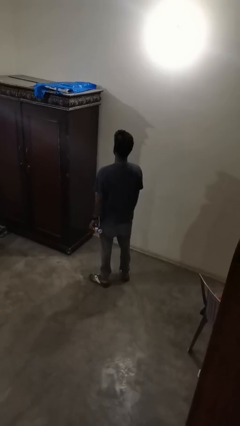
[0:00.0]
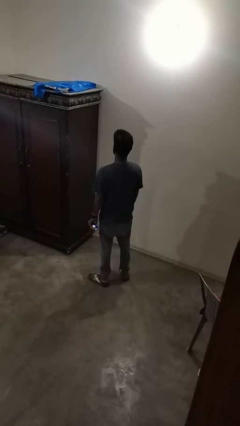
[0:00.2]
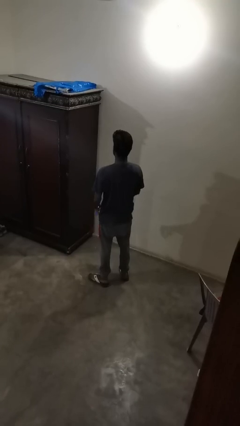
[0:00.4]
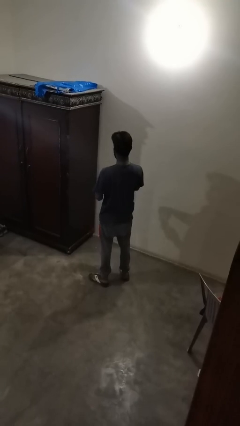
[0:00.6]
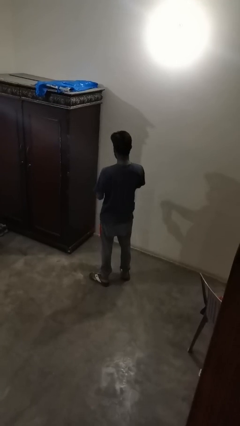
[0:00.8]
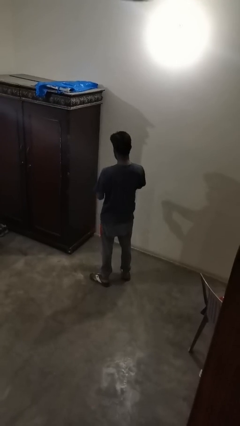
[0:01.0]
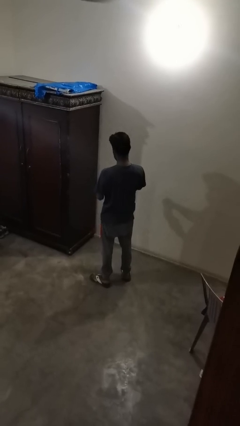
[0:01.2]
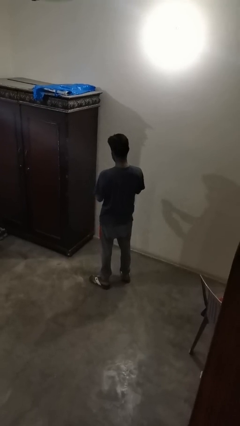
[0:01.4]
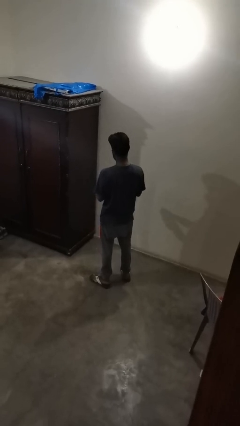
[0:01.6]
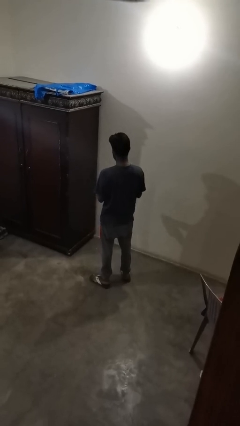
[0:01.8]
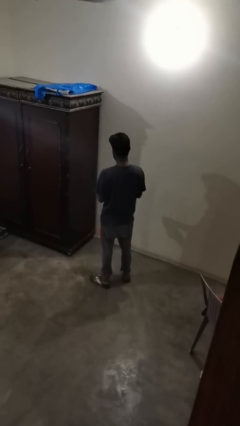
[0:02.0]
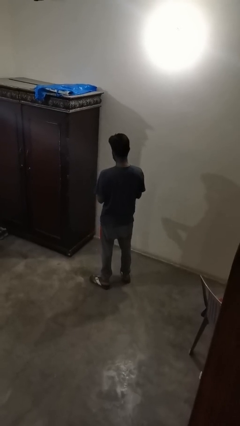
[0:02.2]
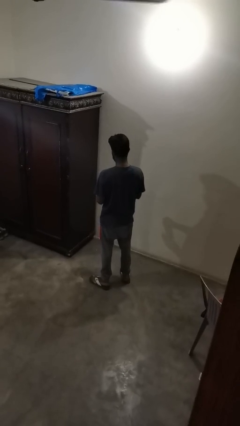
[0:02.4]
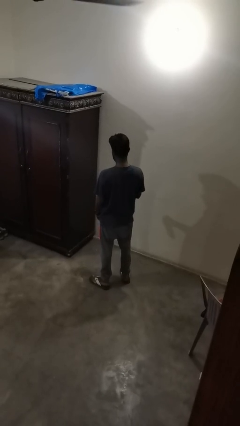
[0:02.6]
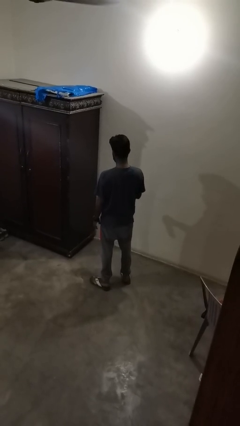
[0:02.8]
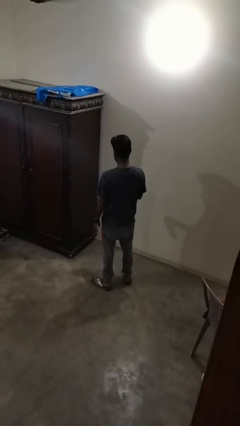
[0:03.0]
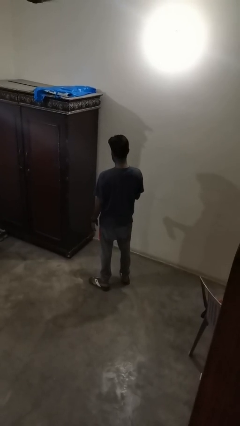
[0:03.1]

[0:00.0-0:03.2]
person opens beverage can

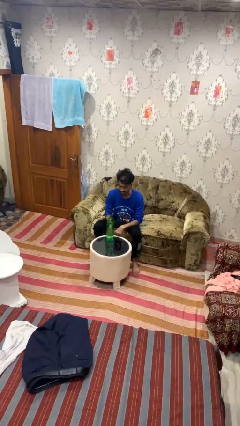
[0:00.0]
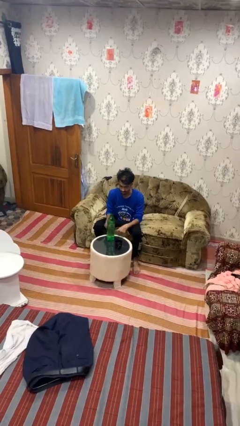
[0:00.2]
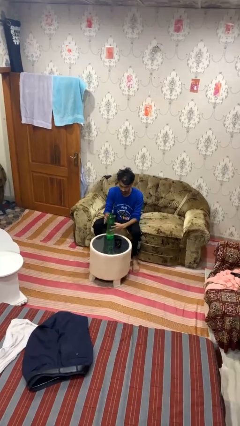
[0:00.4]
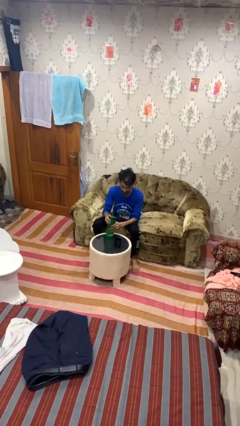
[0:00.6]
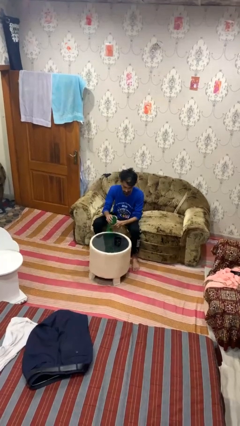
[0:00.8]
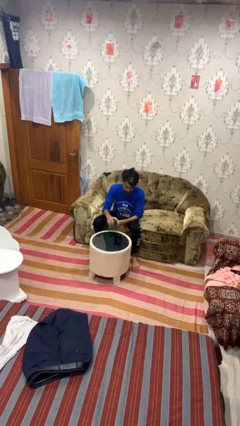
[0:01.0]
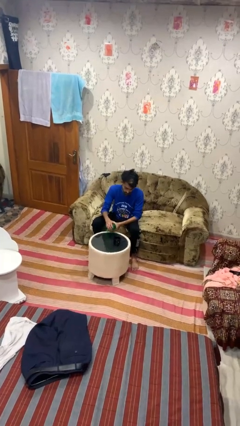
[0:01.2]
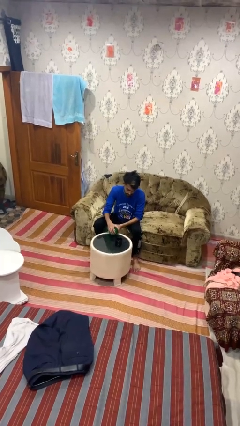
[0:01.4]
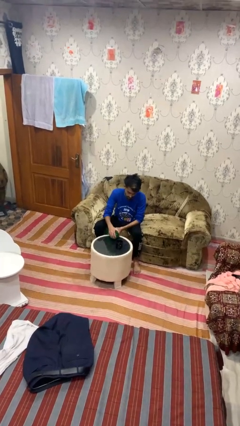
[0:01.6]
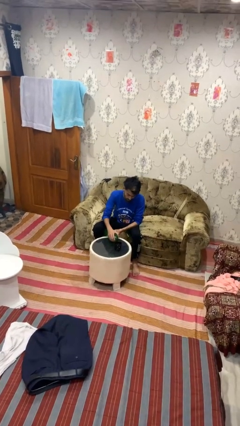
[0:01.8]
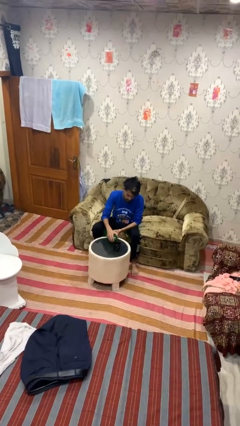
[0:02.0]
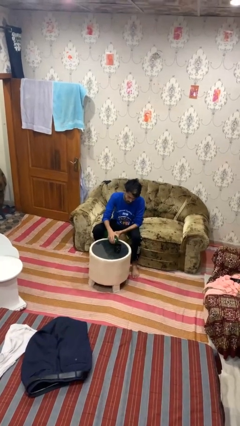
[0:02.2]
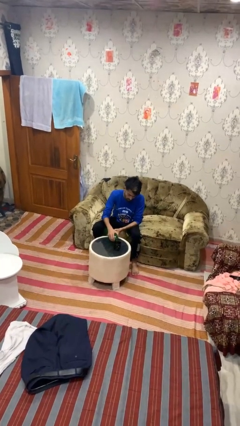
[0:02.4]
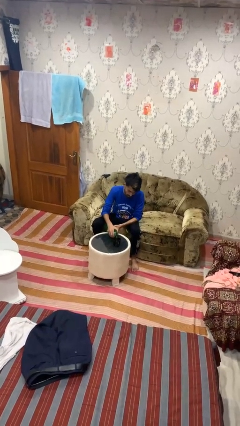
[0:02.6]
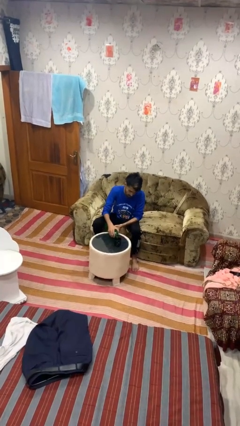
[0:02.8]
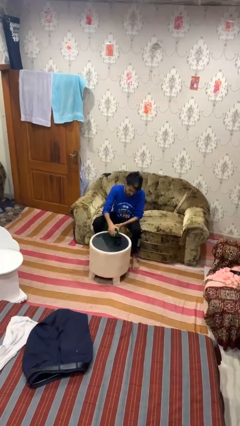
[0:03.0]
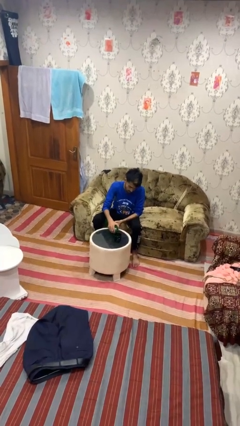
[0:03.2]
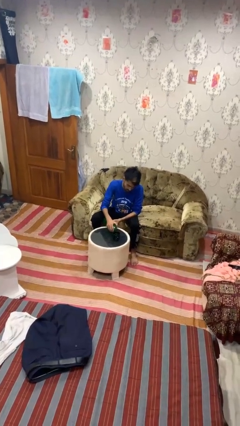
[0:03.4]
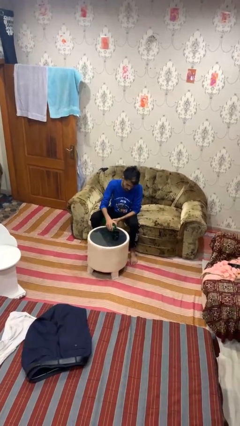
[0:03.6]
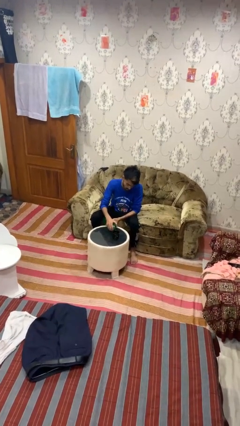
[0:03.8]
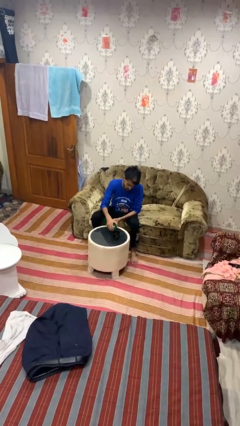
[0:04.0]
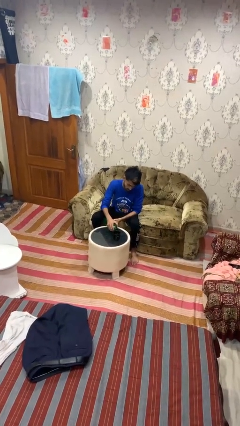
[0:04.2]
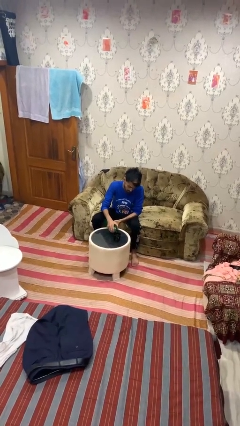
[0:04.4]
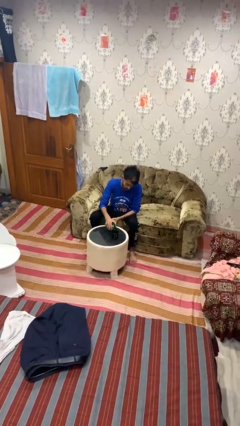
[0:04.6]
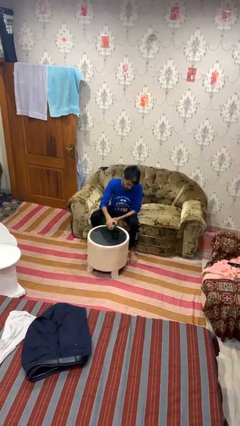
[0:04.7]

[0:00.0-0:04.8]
person pours liquid into cup

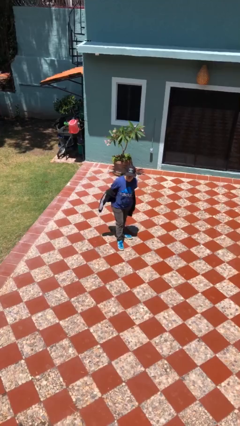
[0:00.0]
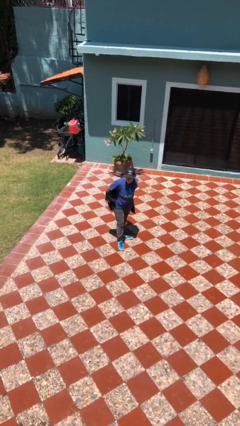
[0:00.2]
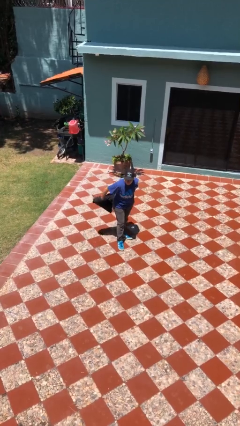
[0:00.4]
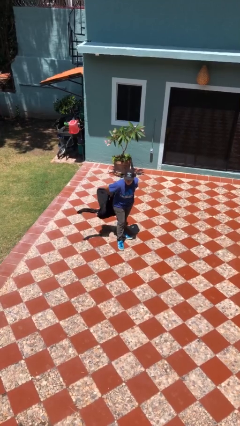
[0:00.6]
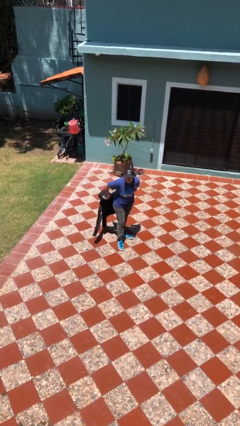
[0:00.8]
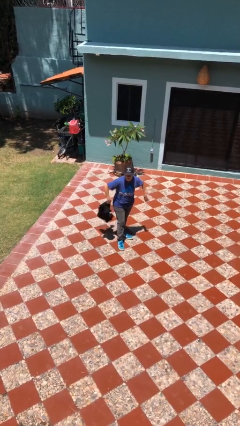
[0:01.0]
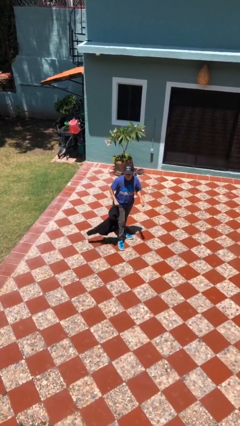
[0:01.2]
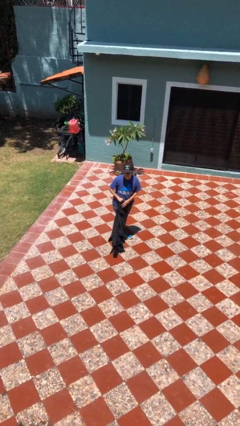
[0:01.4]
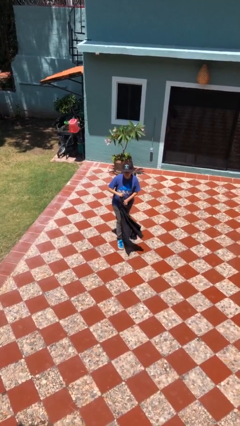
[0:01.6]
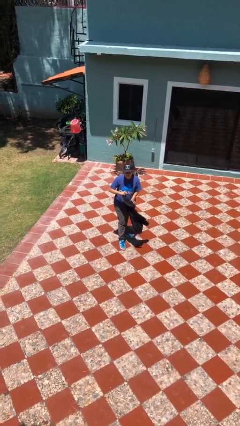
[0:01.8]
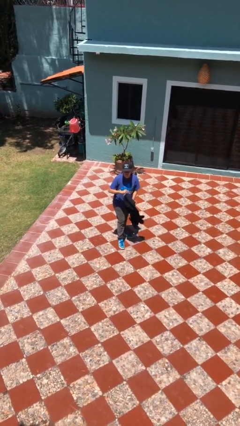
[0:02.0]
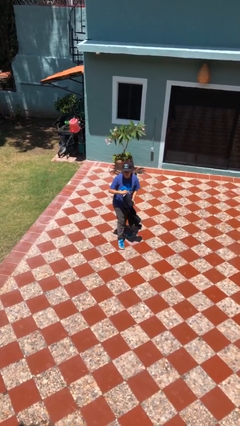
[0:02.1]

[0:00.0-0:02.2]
person takes off jacket

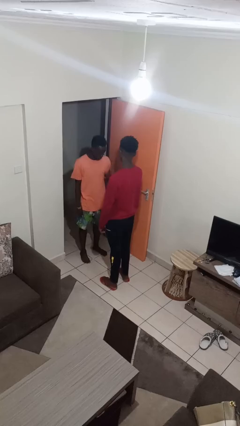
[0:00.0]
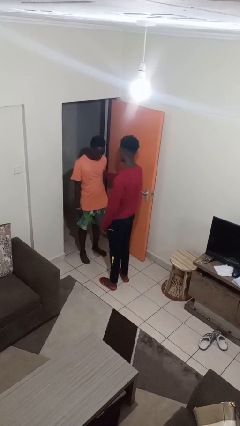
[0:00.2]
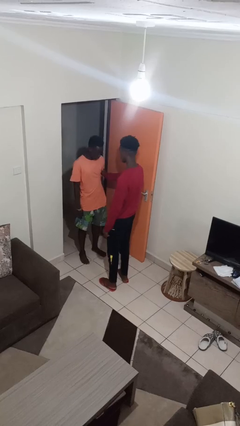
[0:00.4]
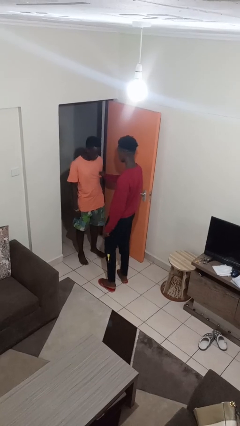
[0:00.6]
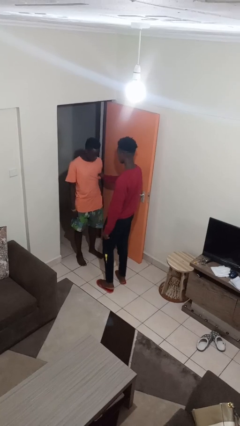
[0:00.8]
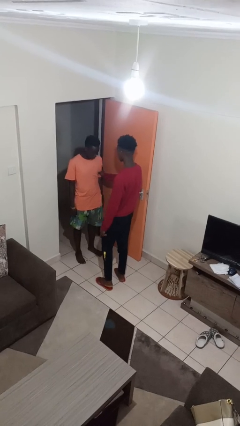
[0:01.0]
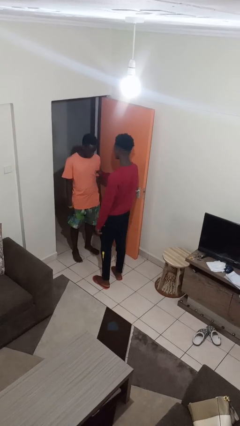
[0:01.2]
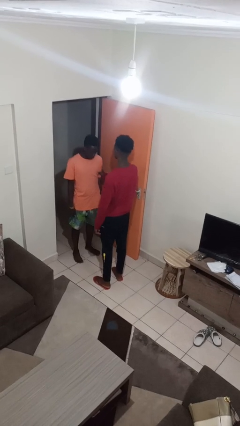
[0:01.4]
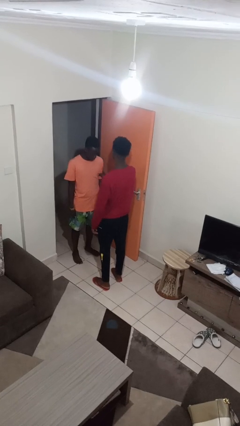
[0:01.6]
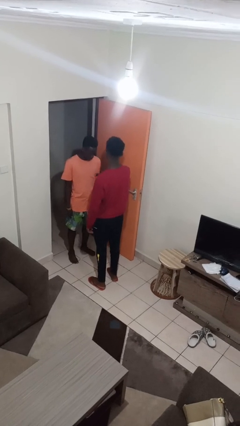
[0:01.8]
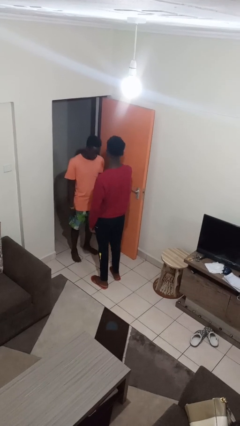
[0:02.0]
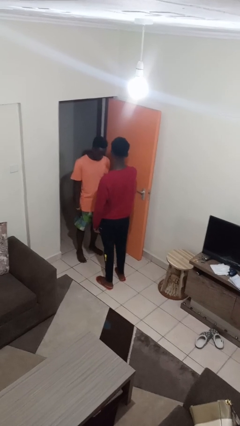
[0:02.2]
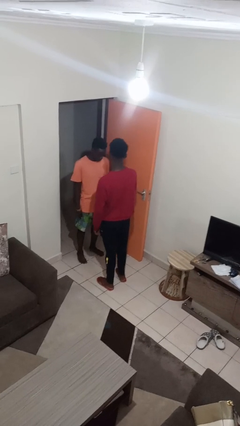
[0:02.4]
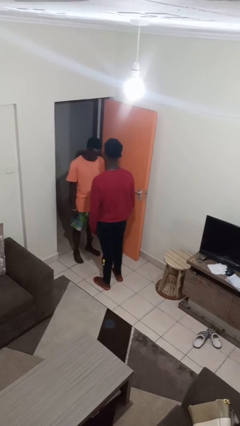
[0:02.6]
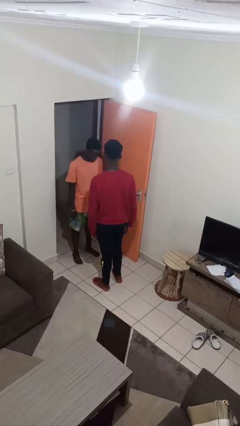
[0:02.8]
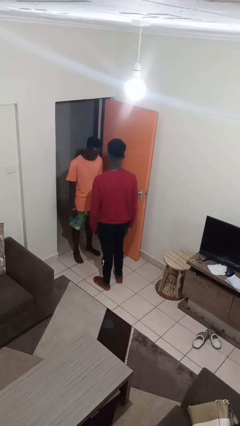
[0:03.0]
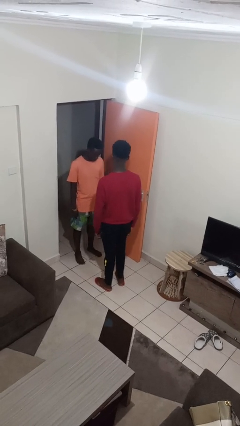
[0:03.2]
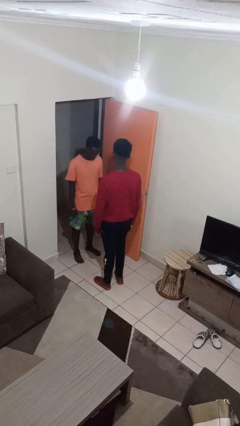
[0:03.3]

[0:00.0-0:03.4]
person grabs person by bicep

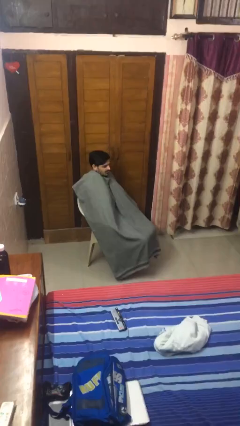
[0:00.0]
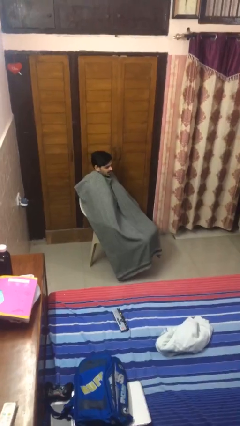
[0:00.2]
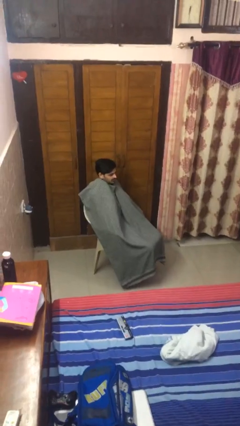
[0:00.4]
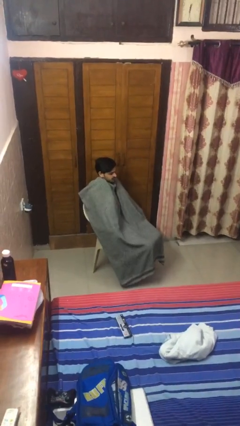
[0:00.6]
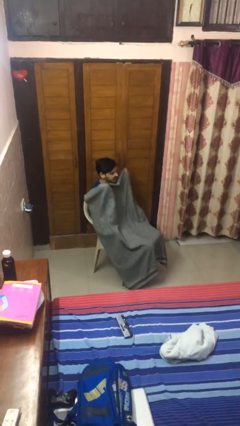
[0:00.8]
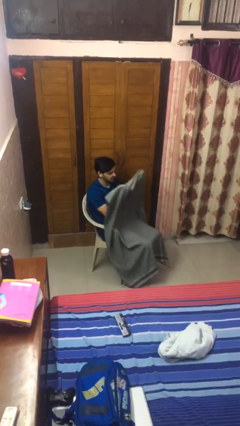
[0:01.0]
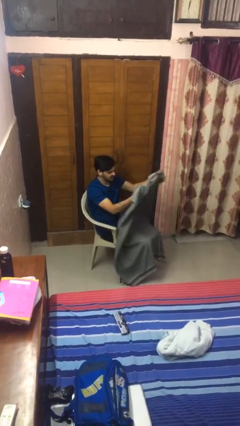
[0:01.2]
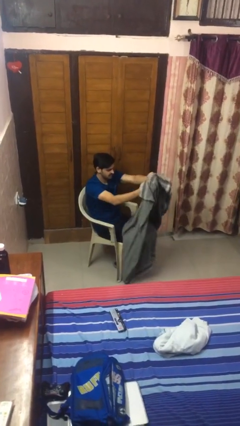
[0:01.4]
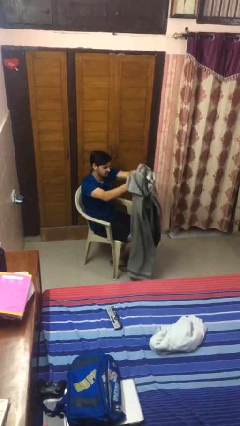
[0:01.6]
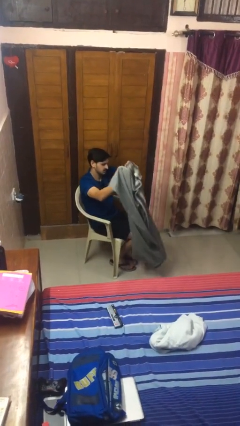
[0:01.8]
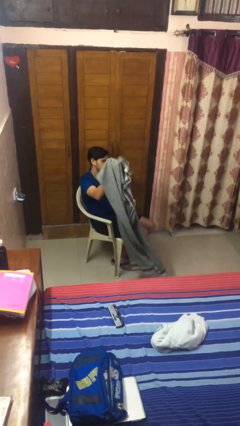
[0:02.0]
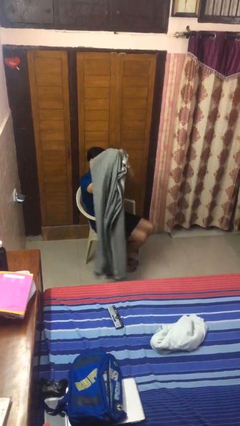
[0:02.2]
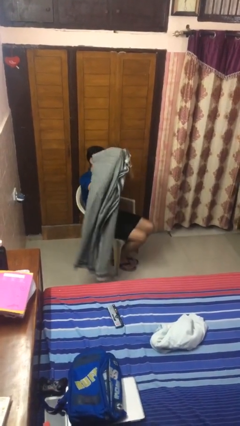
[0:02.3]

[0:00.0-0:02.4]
person uncovers with blanket

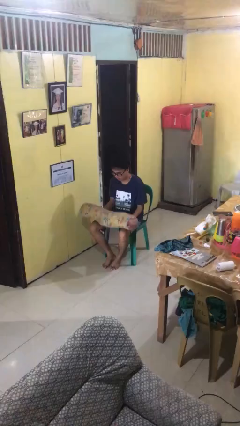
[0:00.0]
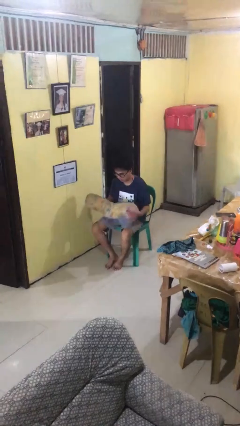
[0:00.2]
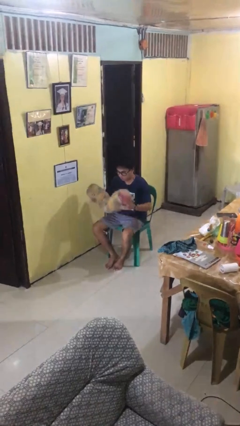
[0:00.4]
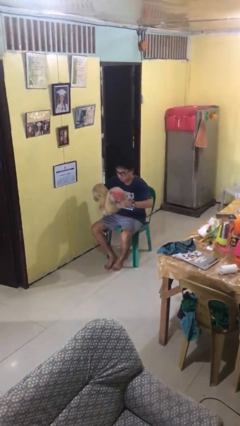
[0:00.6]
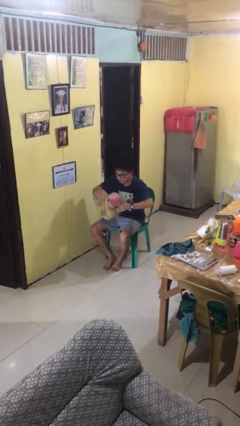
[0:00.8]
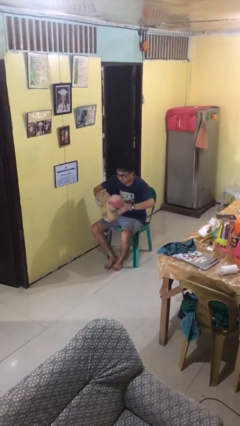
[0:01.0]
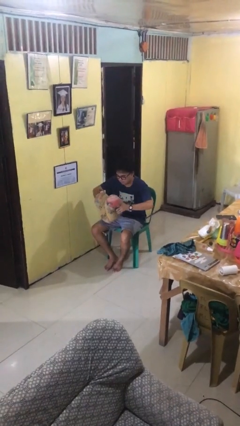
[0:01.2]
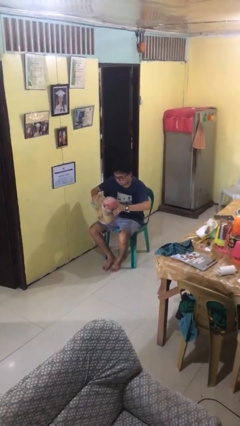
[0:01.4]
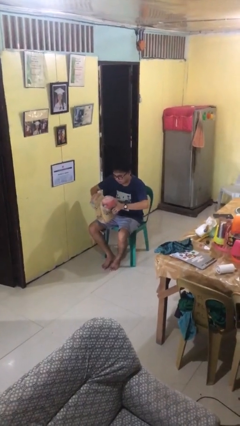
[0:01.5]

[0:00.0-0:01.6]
person squeezes object
